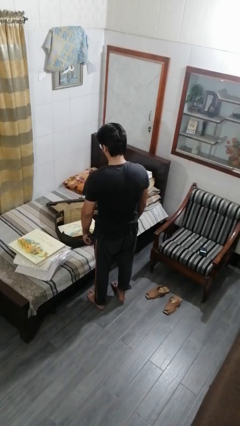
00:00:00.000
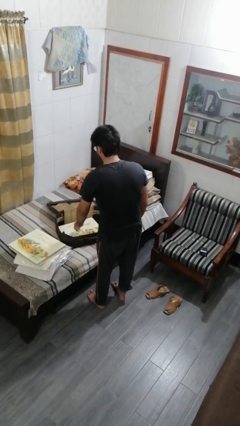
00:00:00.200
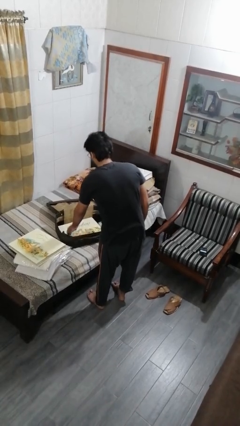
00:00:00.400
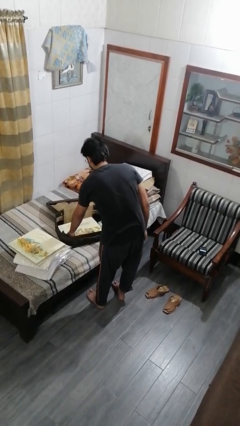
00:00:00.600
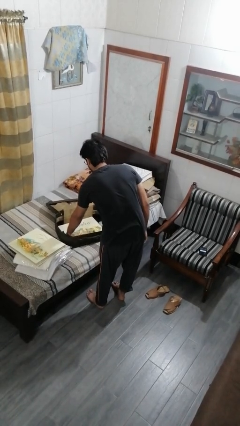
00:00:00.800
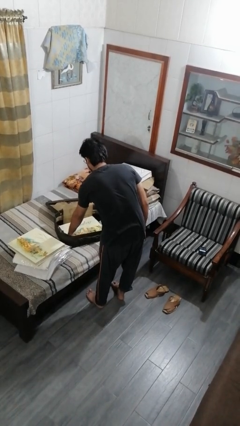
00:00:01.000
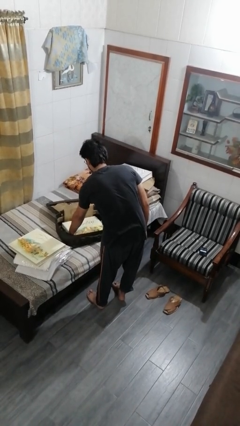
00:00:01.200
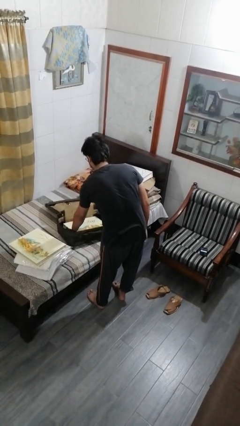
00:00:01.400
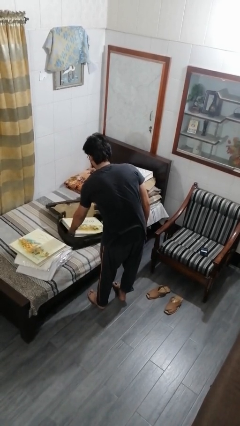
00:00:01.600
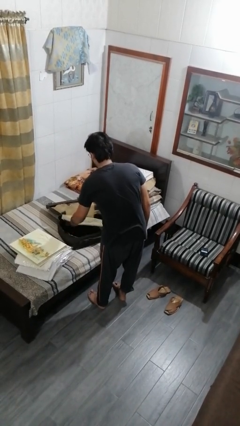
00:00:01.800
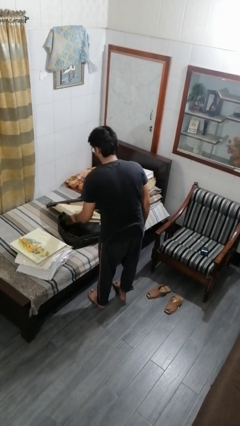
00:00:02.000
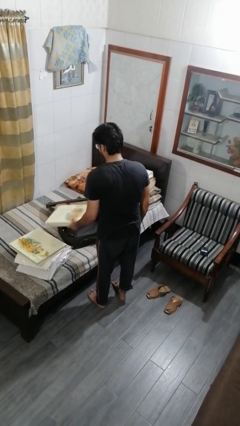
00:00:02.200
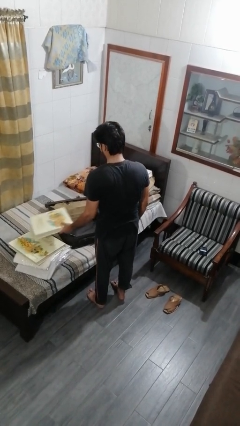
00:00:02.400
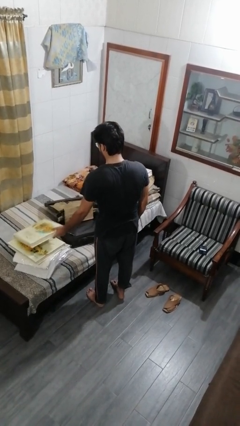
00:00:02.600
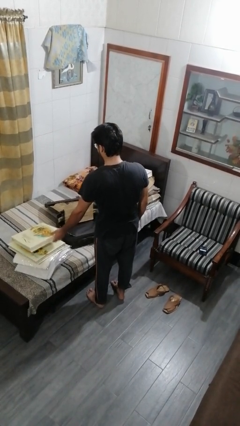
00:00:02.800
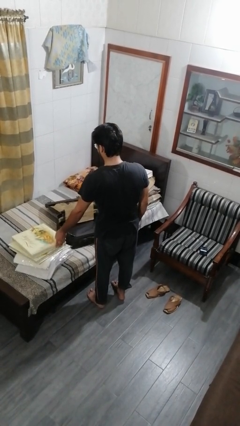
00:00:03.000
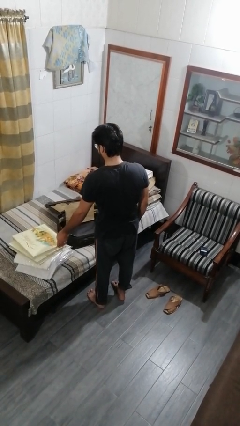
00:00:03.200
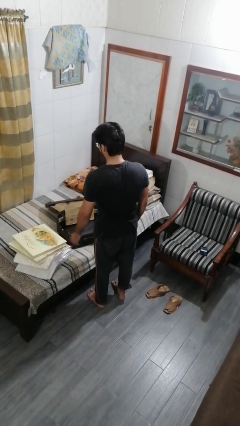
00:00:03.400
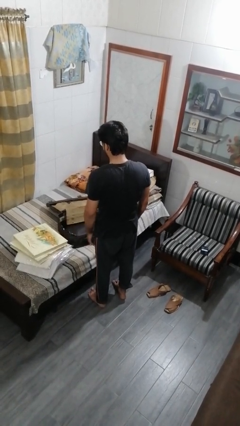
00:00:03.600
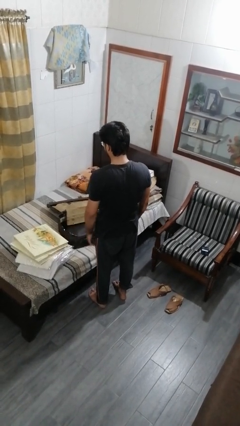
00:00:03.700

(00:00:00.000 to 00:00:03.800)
person unloads clothes from suitcase

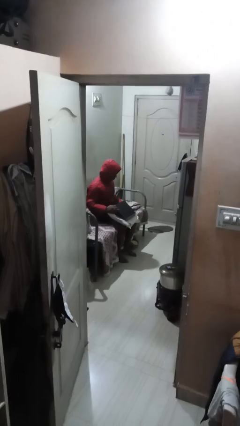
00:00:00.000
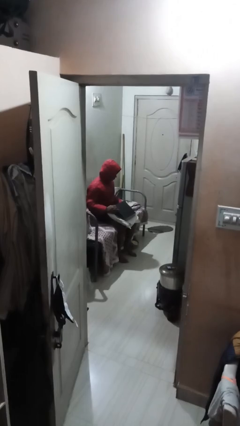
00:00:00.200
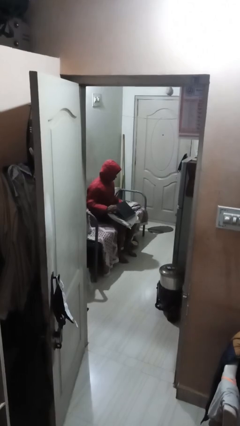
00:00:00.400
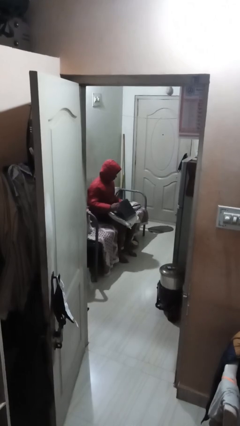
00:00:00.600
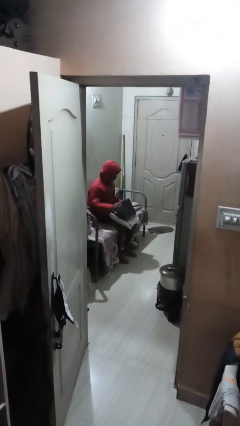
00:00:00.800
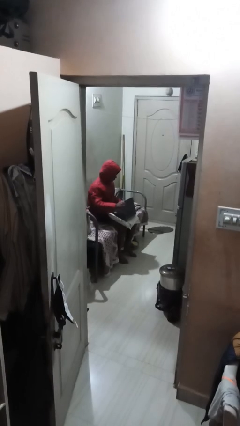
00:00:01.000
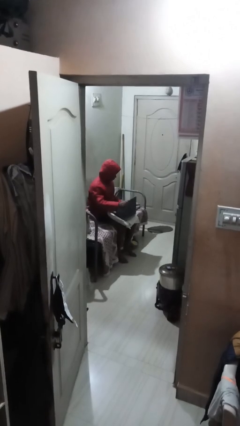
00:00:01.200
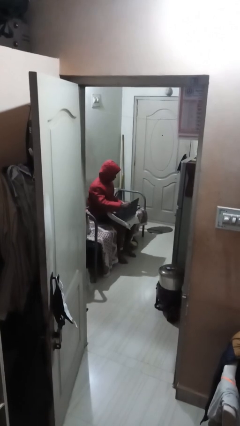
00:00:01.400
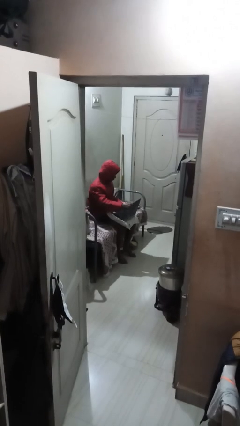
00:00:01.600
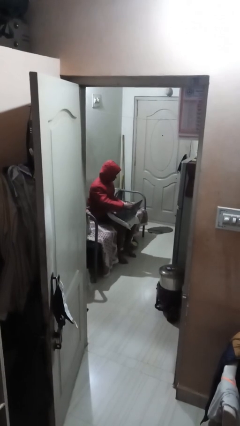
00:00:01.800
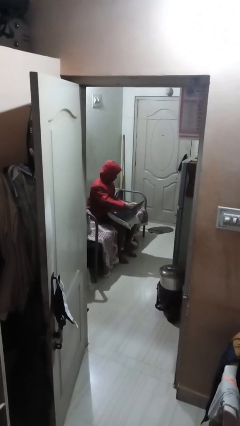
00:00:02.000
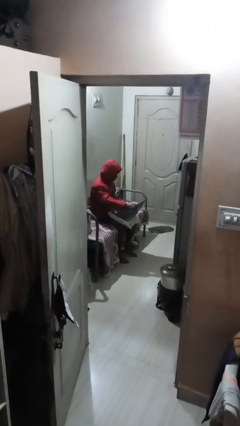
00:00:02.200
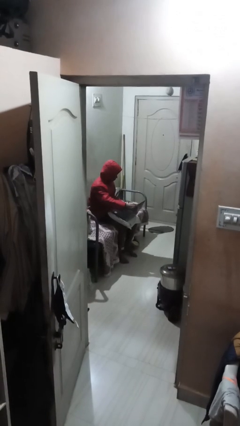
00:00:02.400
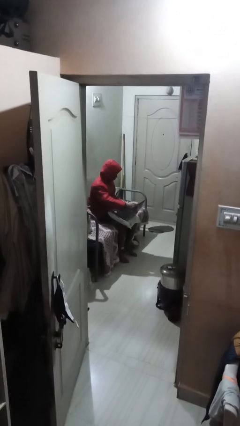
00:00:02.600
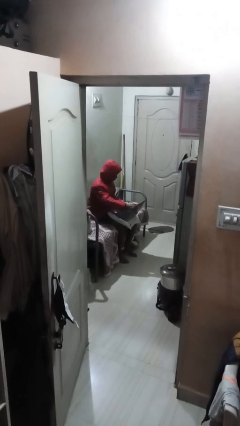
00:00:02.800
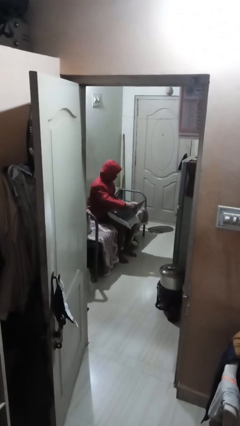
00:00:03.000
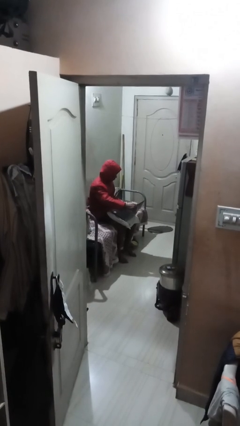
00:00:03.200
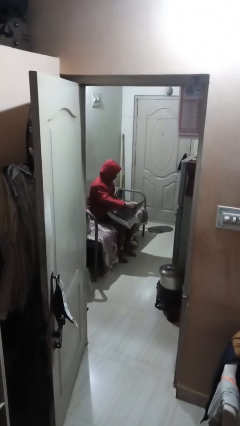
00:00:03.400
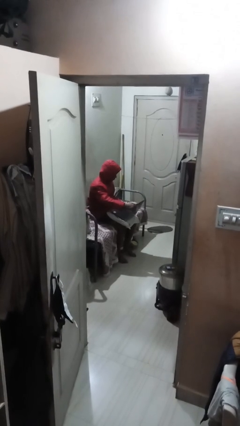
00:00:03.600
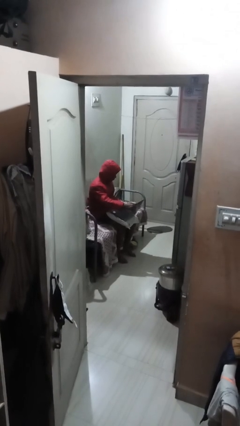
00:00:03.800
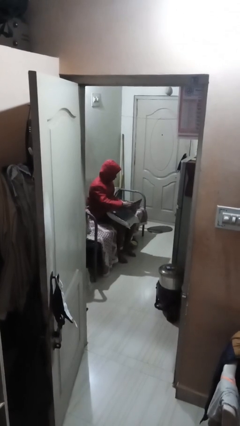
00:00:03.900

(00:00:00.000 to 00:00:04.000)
person interacts with laptop

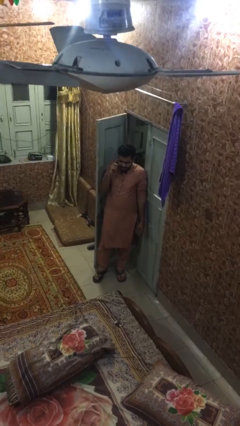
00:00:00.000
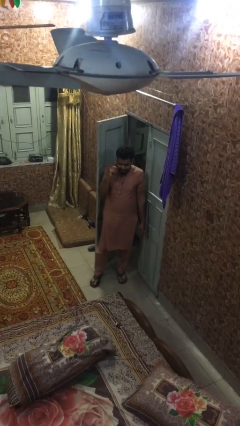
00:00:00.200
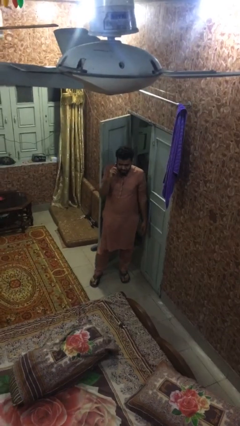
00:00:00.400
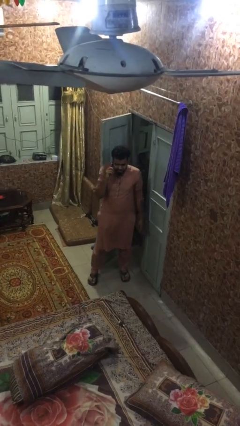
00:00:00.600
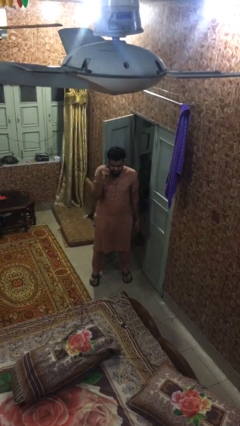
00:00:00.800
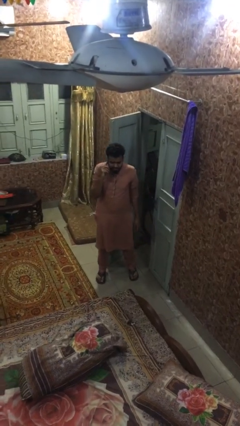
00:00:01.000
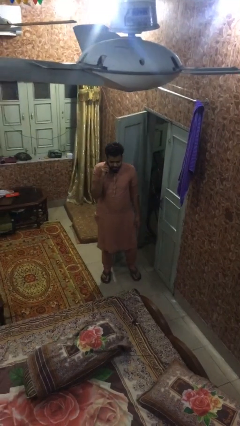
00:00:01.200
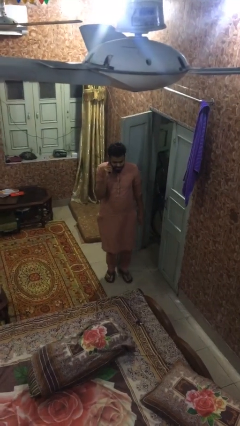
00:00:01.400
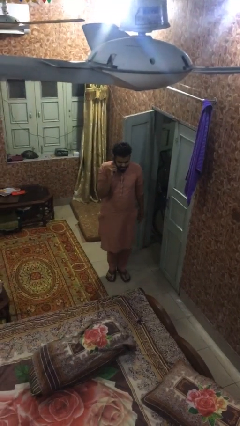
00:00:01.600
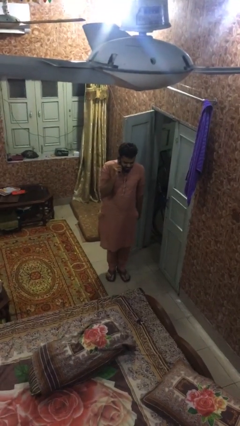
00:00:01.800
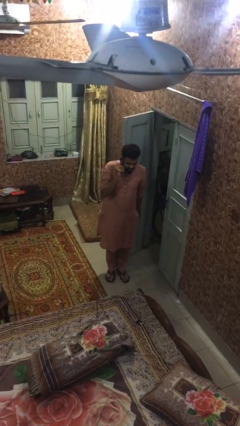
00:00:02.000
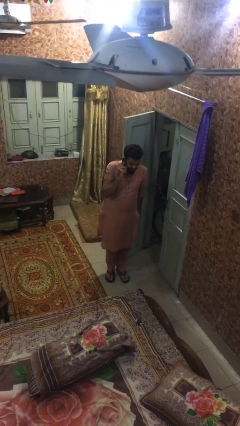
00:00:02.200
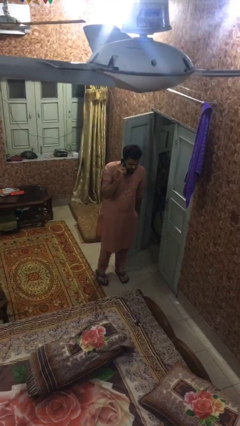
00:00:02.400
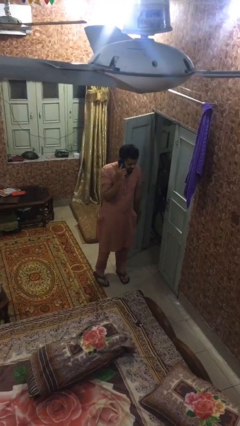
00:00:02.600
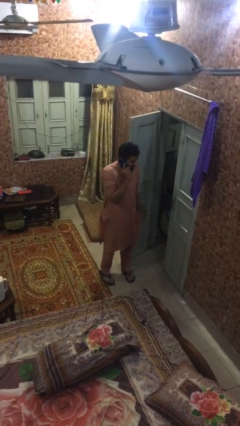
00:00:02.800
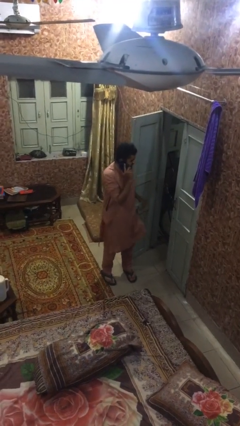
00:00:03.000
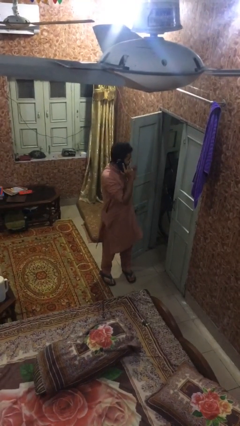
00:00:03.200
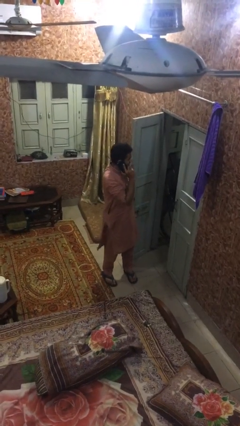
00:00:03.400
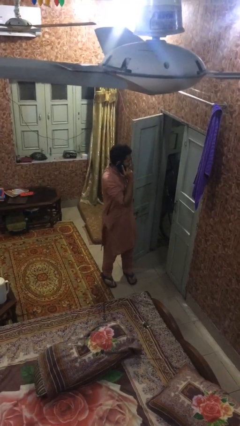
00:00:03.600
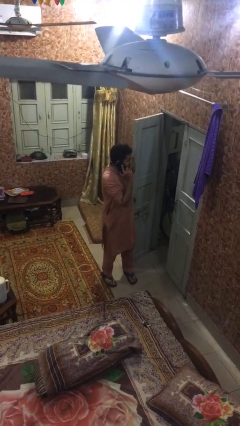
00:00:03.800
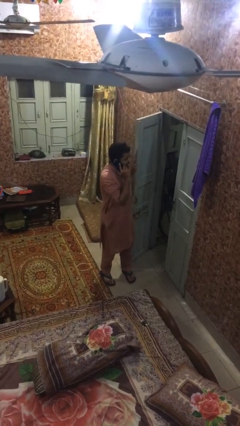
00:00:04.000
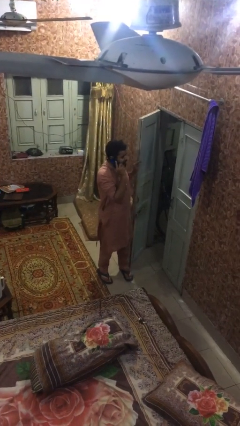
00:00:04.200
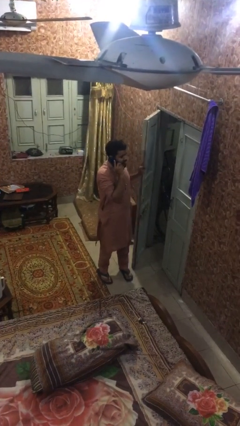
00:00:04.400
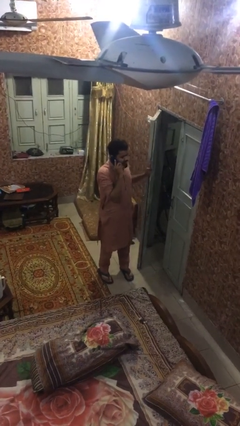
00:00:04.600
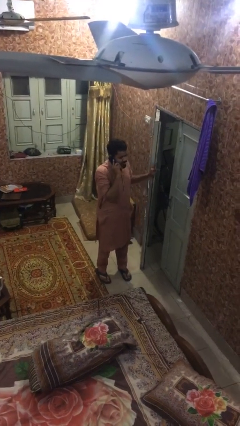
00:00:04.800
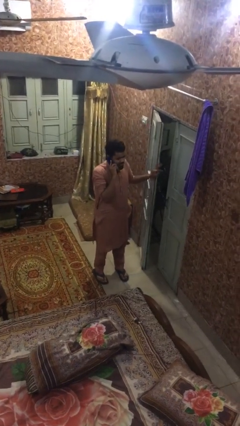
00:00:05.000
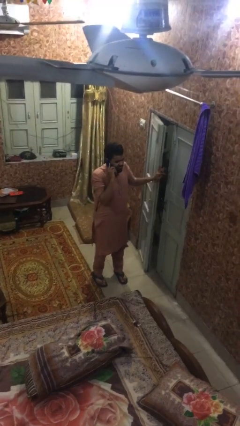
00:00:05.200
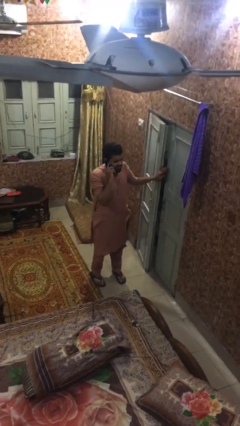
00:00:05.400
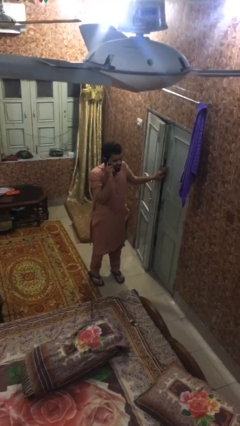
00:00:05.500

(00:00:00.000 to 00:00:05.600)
person enters scene through structure

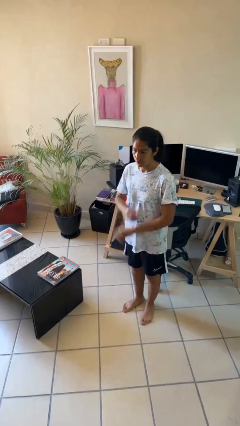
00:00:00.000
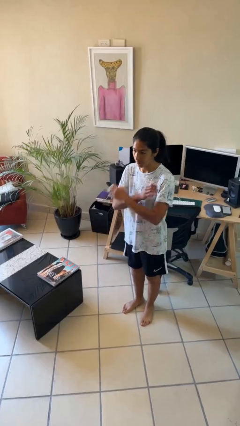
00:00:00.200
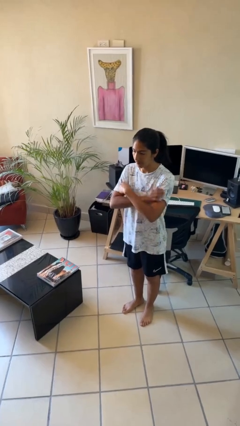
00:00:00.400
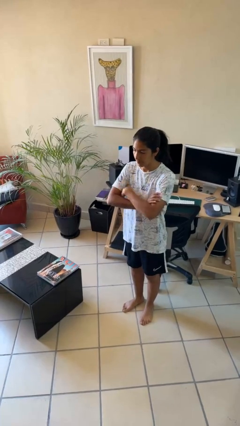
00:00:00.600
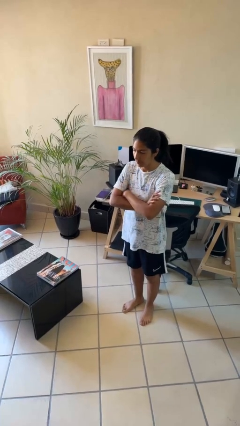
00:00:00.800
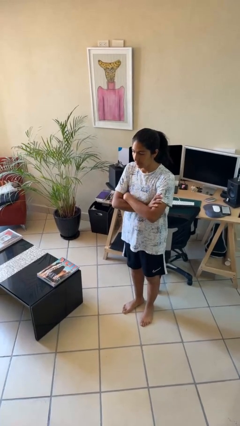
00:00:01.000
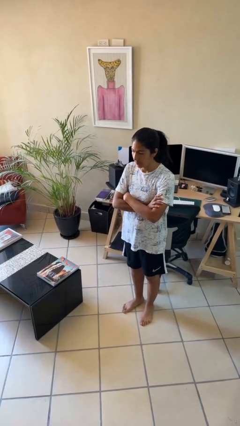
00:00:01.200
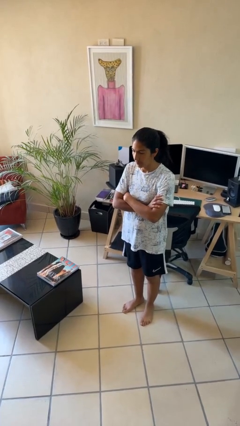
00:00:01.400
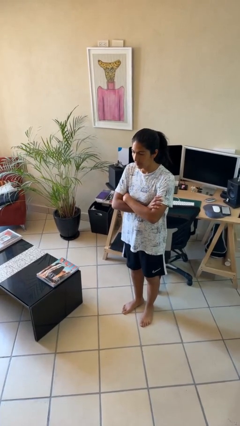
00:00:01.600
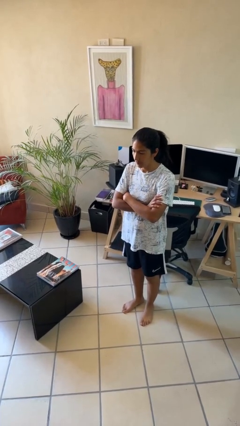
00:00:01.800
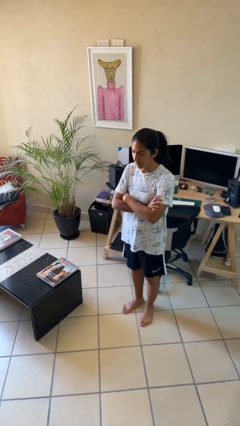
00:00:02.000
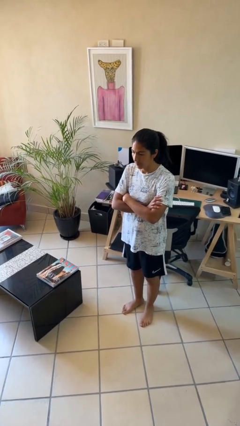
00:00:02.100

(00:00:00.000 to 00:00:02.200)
person crosses arms

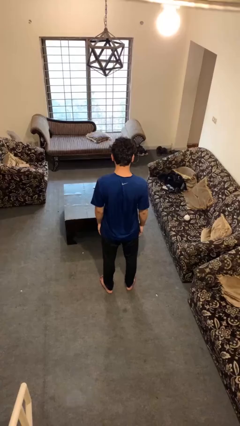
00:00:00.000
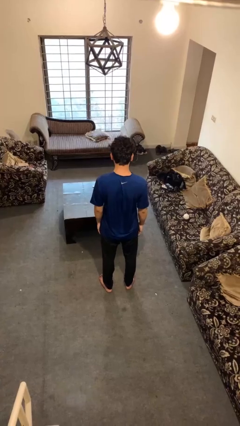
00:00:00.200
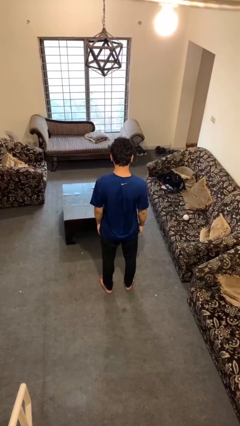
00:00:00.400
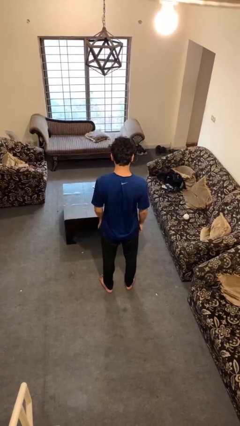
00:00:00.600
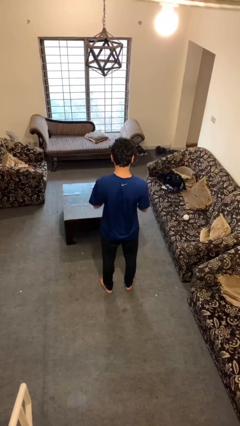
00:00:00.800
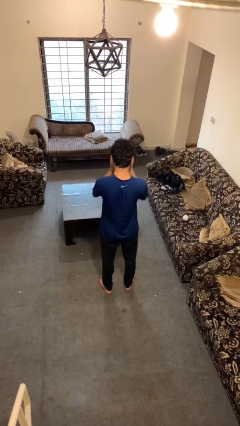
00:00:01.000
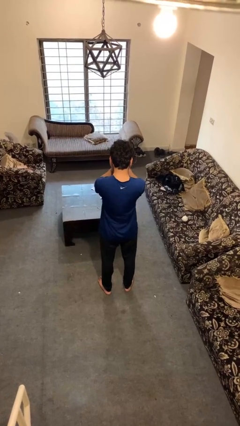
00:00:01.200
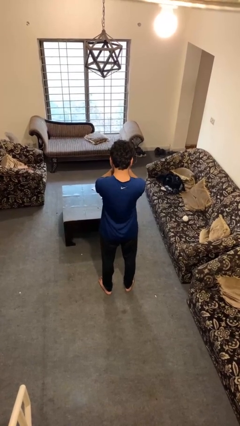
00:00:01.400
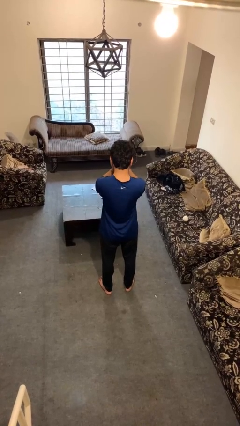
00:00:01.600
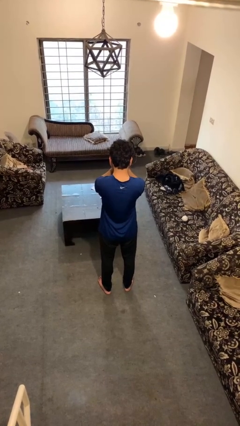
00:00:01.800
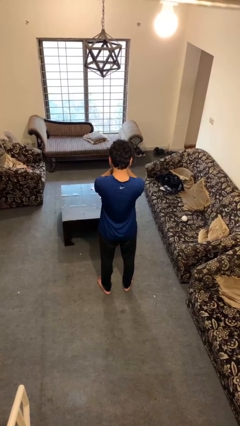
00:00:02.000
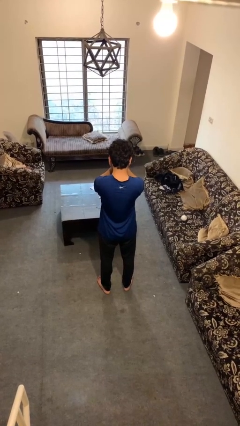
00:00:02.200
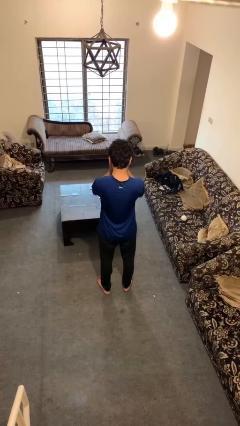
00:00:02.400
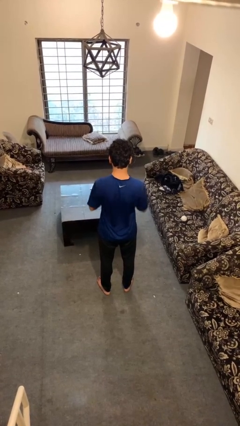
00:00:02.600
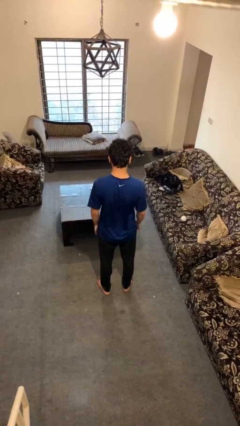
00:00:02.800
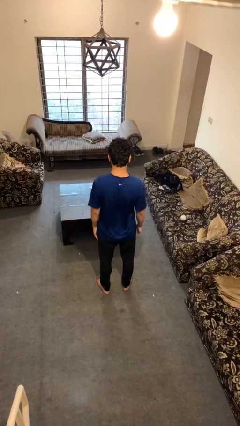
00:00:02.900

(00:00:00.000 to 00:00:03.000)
person covers face with hands
